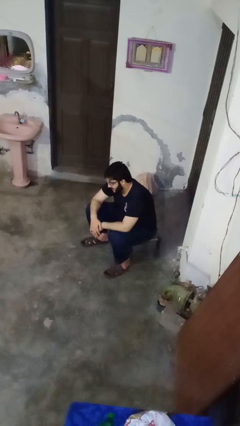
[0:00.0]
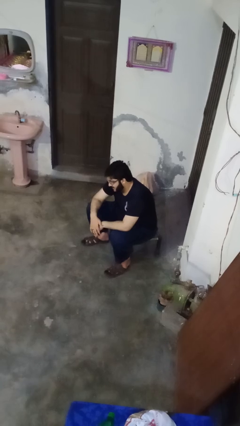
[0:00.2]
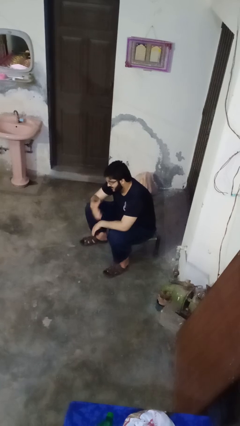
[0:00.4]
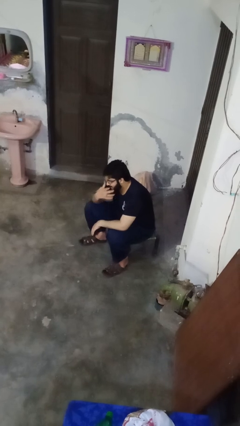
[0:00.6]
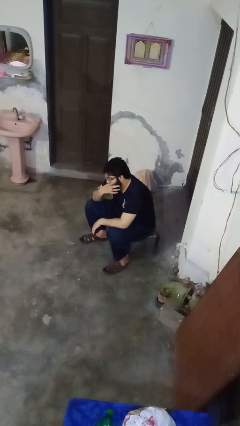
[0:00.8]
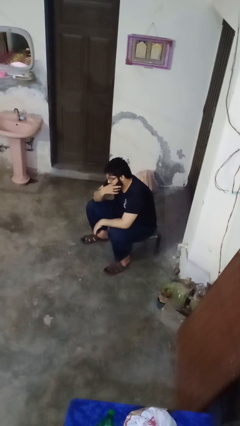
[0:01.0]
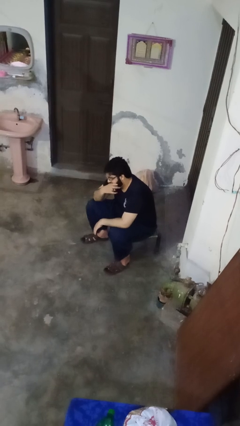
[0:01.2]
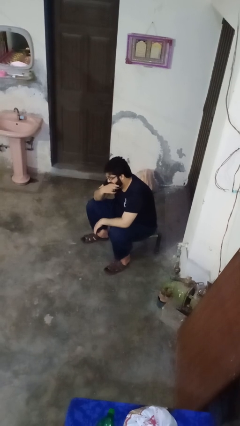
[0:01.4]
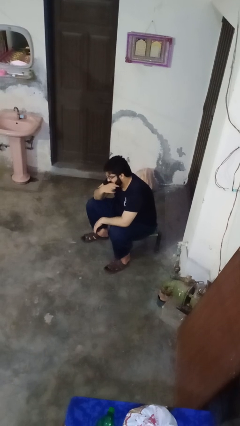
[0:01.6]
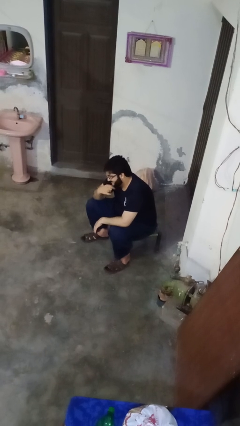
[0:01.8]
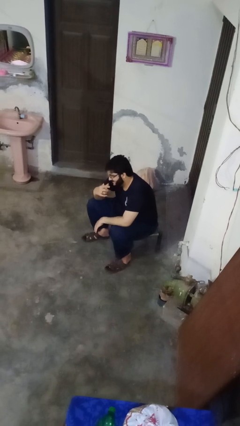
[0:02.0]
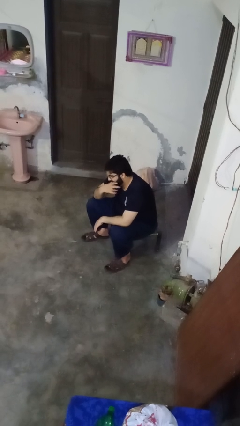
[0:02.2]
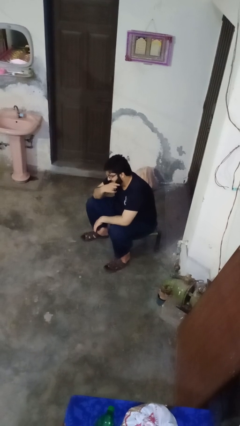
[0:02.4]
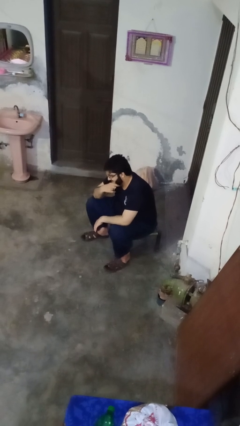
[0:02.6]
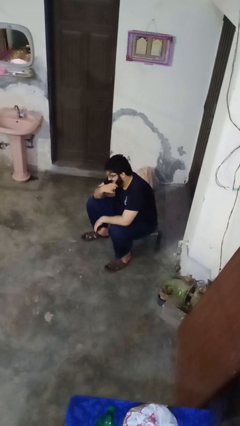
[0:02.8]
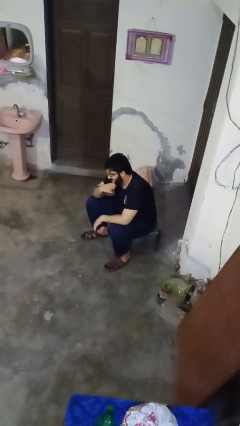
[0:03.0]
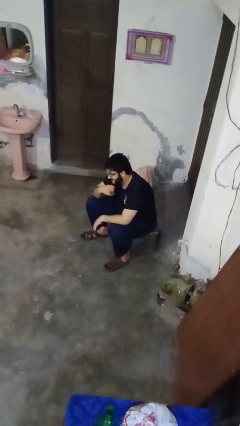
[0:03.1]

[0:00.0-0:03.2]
person strokes chin

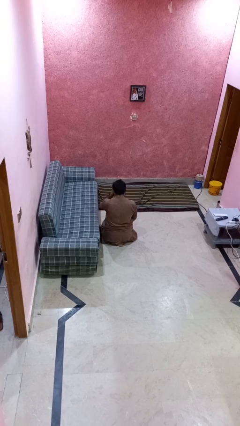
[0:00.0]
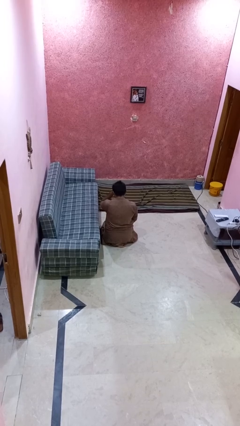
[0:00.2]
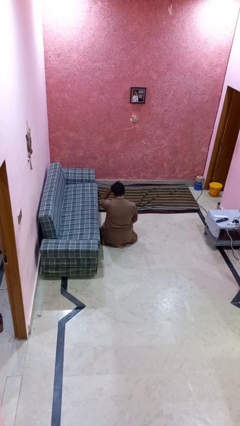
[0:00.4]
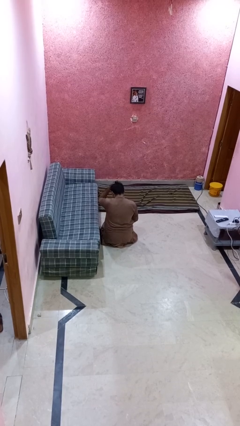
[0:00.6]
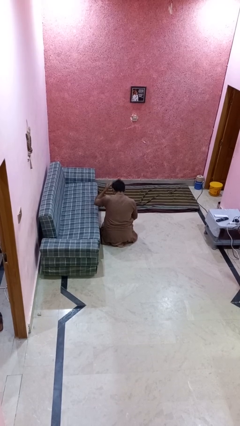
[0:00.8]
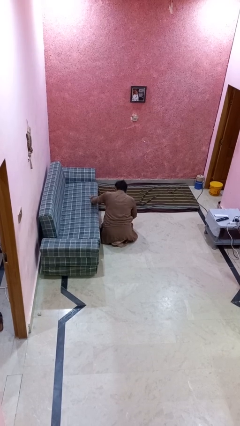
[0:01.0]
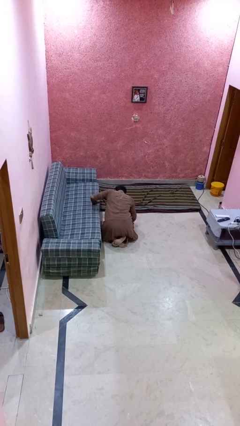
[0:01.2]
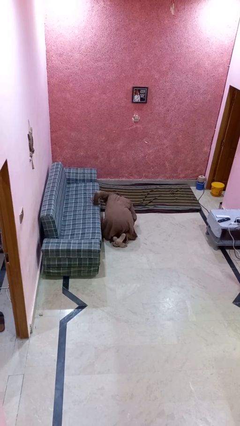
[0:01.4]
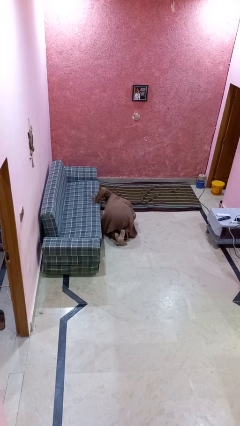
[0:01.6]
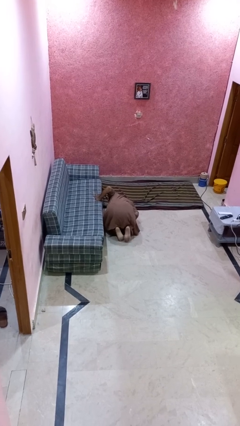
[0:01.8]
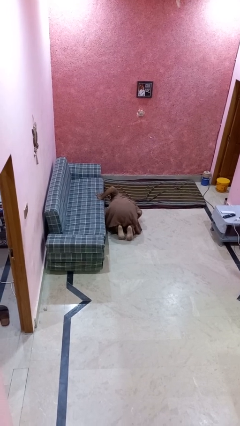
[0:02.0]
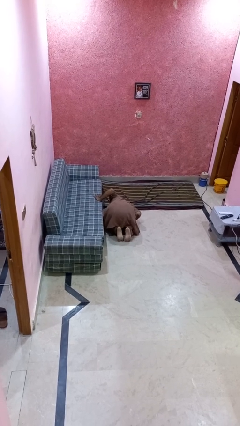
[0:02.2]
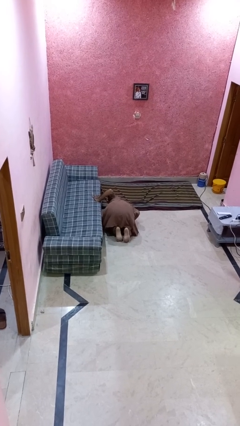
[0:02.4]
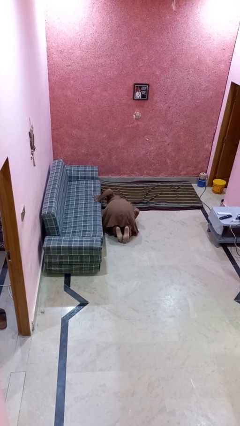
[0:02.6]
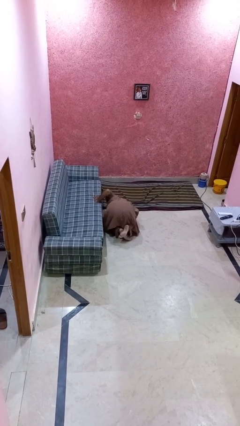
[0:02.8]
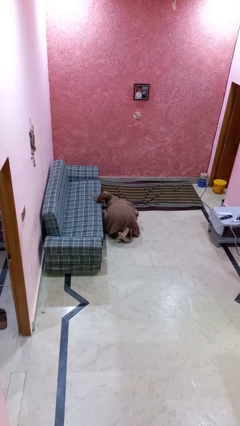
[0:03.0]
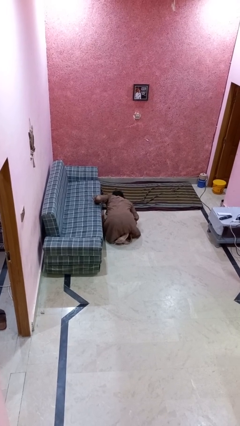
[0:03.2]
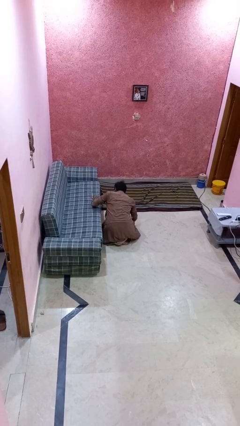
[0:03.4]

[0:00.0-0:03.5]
person searches under couch

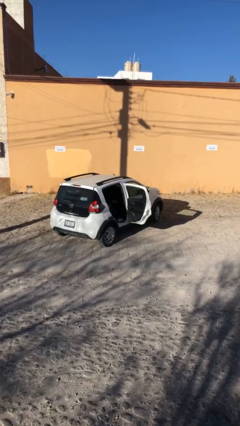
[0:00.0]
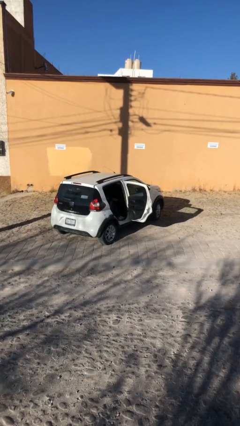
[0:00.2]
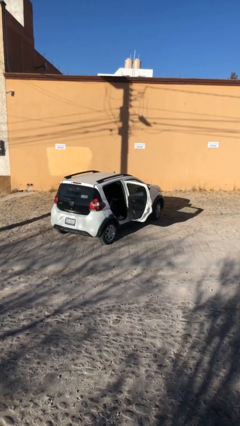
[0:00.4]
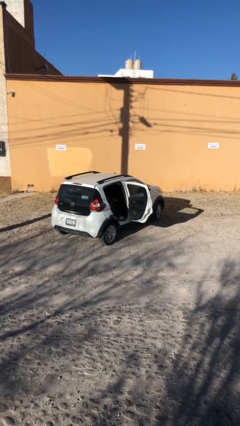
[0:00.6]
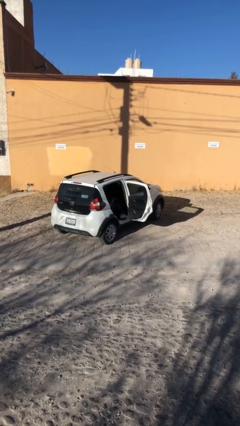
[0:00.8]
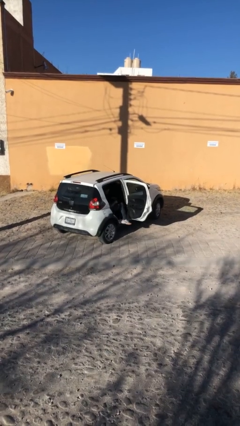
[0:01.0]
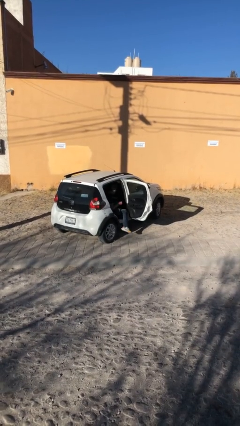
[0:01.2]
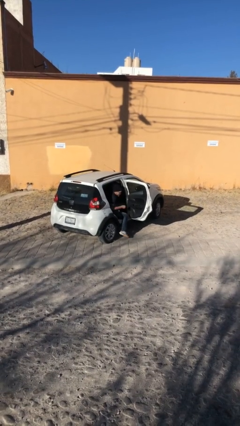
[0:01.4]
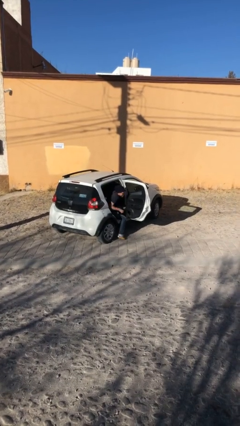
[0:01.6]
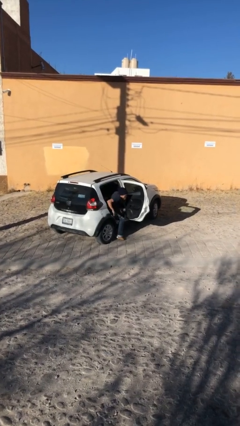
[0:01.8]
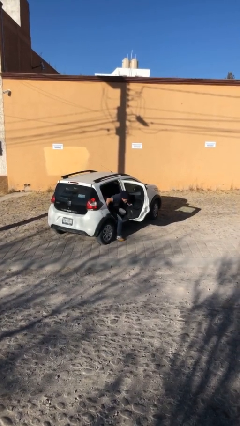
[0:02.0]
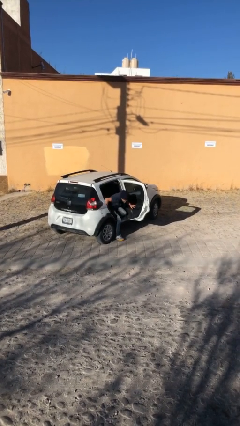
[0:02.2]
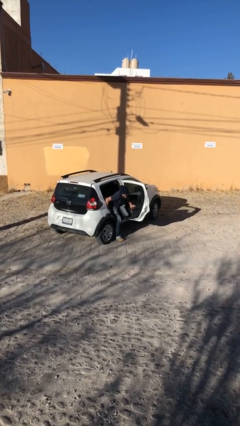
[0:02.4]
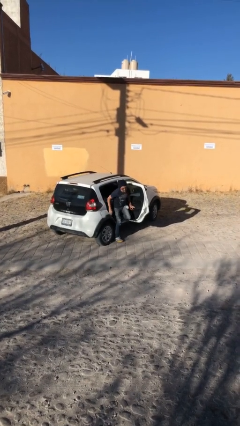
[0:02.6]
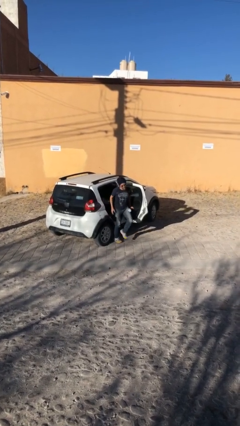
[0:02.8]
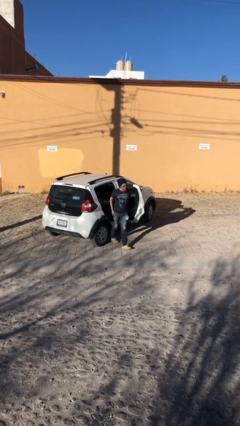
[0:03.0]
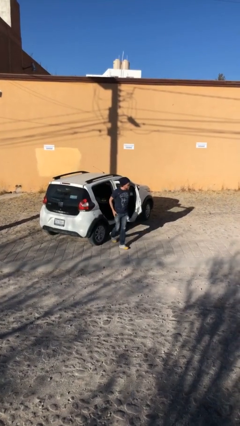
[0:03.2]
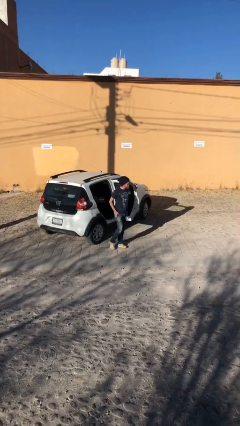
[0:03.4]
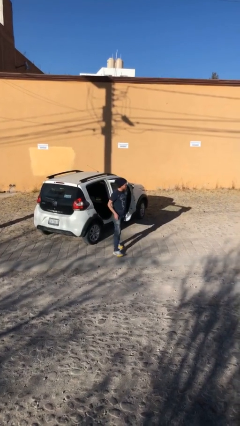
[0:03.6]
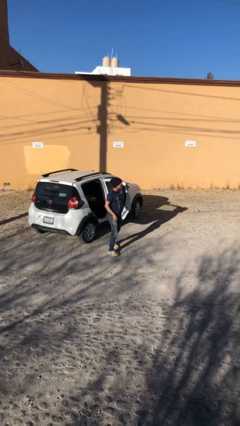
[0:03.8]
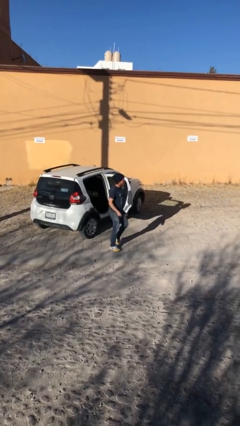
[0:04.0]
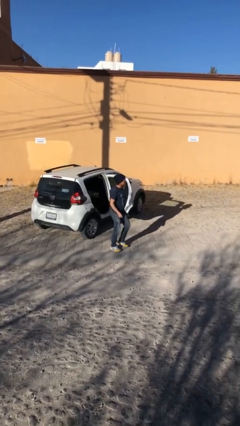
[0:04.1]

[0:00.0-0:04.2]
person exits car

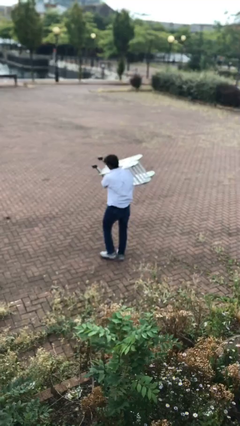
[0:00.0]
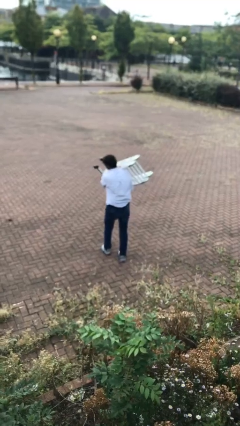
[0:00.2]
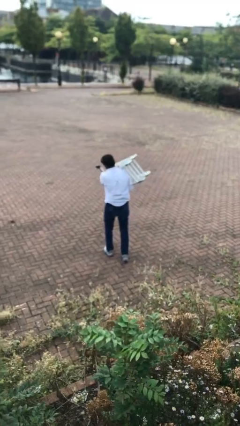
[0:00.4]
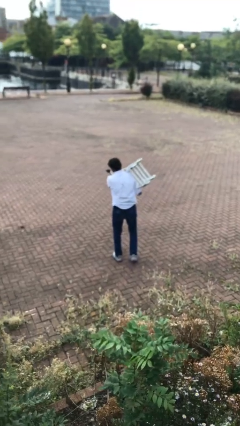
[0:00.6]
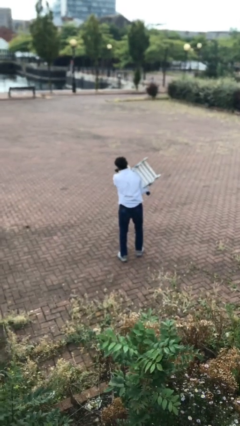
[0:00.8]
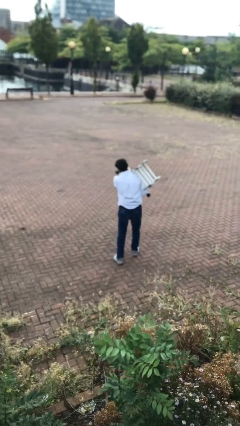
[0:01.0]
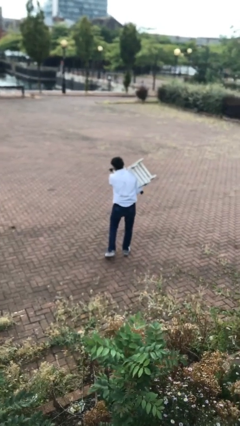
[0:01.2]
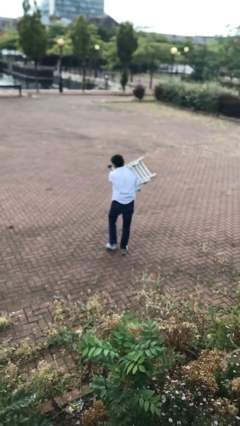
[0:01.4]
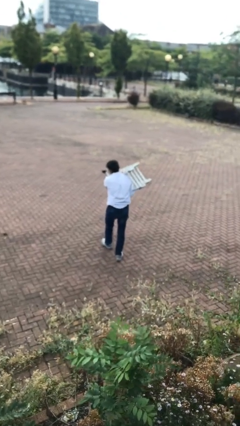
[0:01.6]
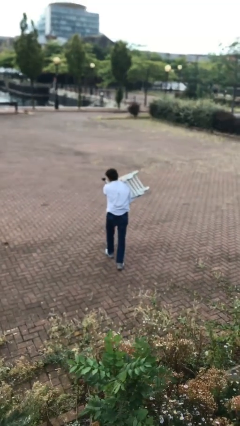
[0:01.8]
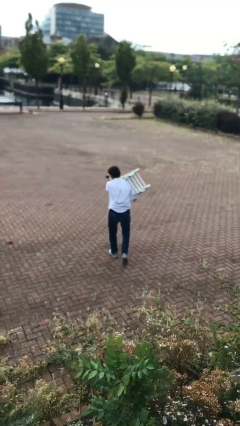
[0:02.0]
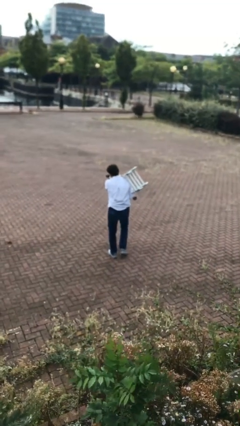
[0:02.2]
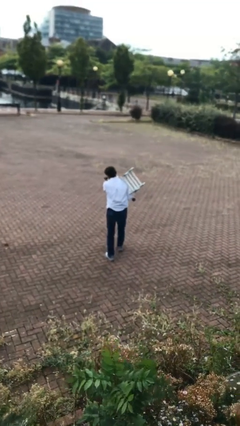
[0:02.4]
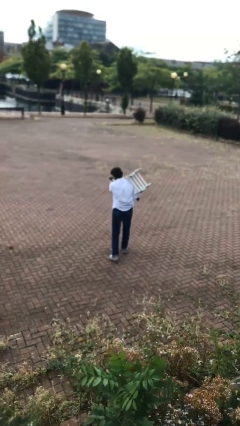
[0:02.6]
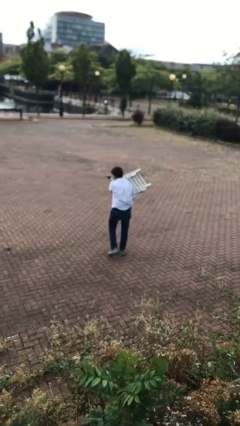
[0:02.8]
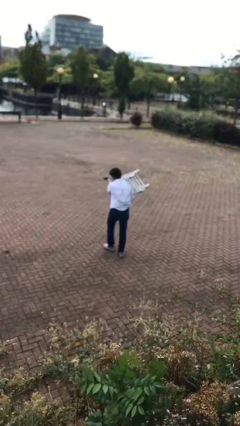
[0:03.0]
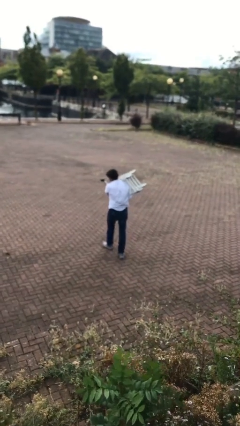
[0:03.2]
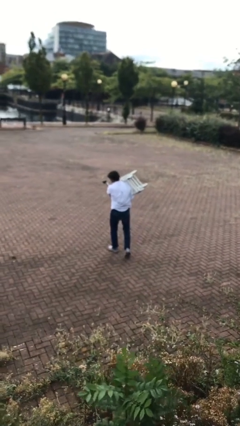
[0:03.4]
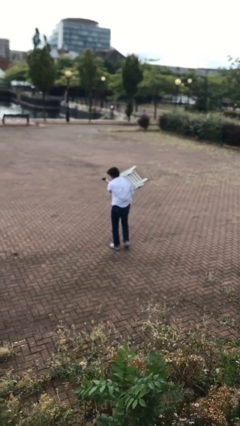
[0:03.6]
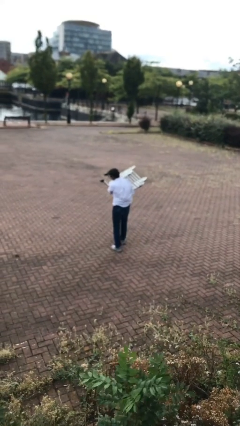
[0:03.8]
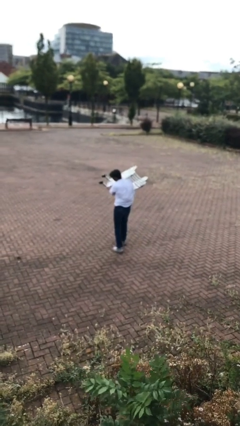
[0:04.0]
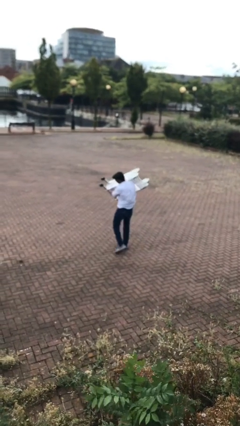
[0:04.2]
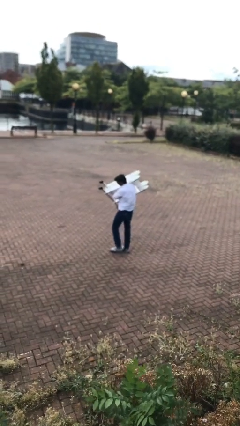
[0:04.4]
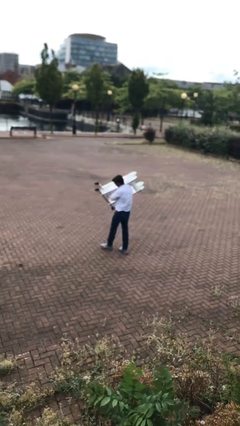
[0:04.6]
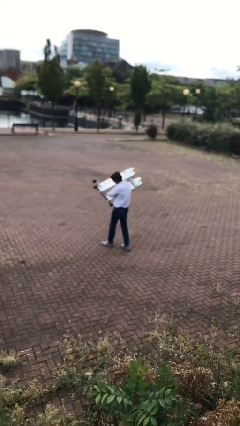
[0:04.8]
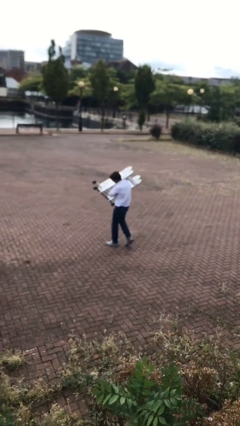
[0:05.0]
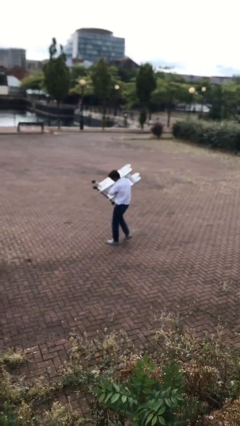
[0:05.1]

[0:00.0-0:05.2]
person carries heavy object

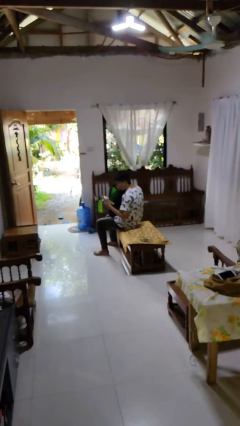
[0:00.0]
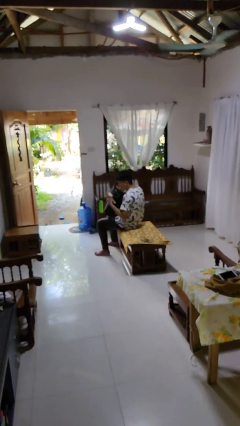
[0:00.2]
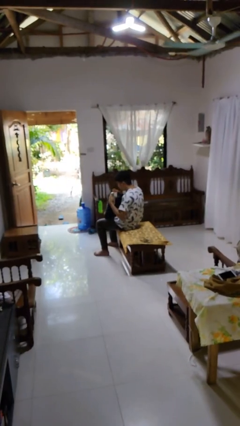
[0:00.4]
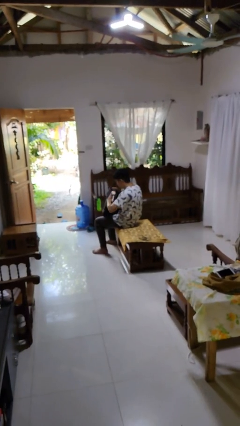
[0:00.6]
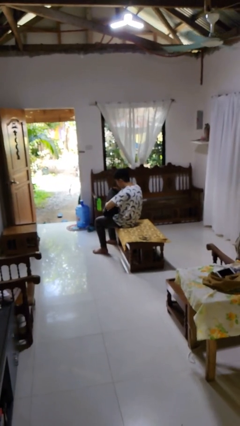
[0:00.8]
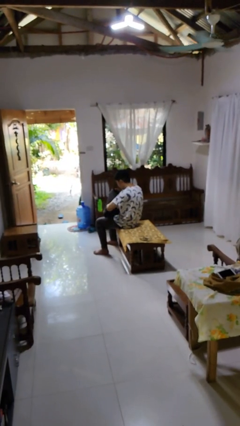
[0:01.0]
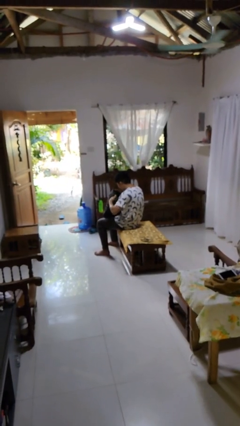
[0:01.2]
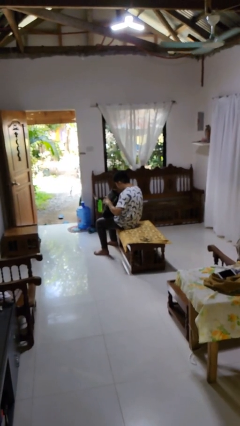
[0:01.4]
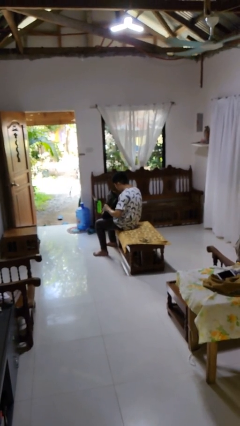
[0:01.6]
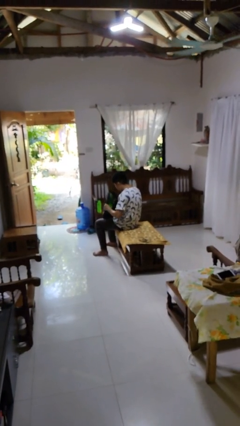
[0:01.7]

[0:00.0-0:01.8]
person puts object into backpack
